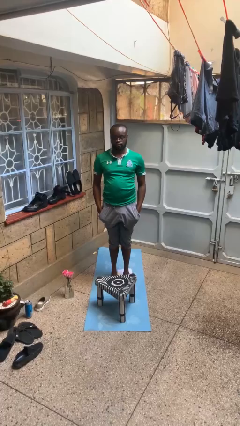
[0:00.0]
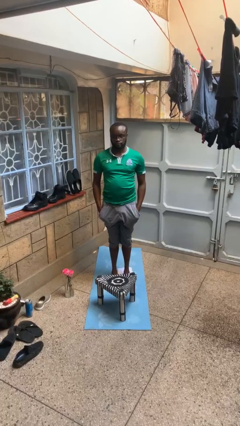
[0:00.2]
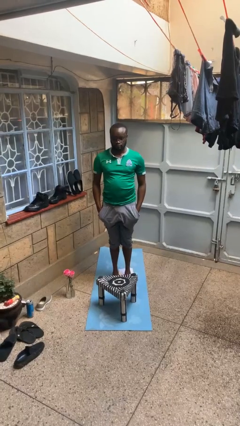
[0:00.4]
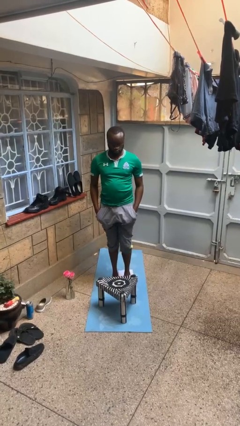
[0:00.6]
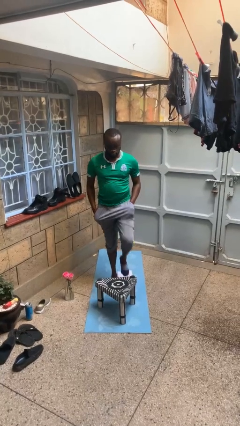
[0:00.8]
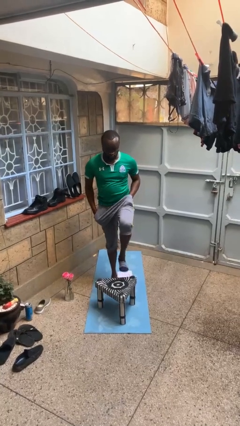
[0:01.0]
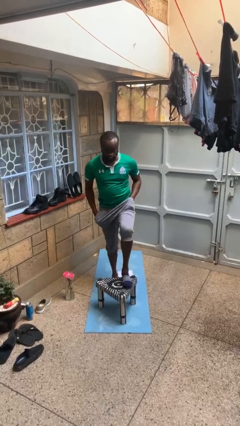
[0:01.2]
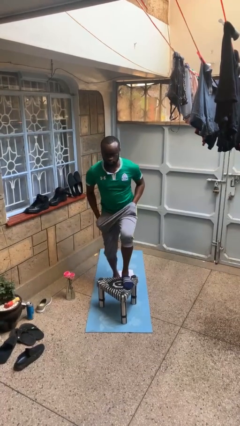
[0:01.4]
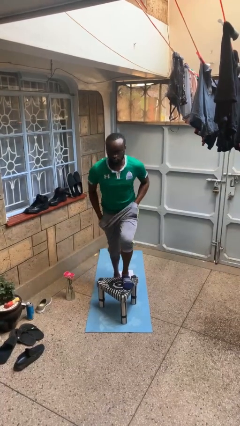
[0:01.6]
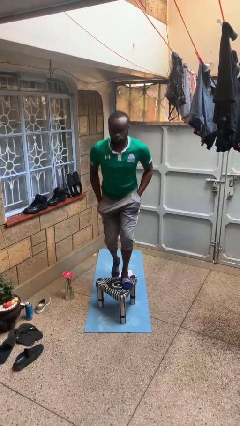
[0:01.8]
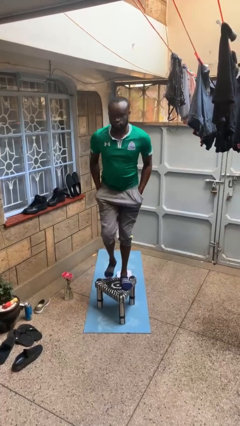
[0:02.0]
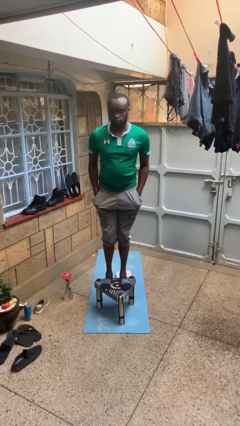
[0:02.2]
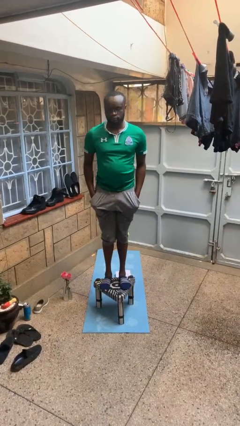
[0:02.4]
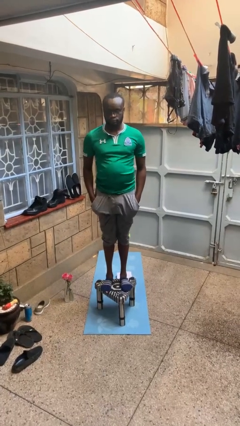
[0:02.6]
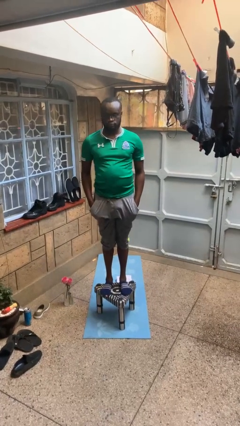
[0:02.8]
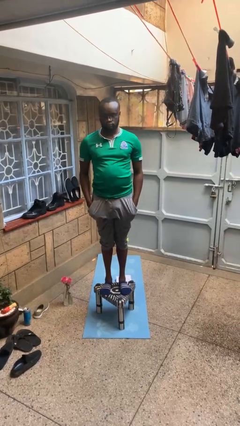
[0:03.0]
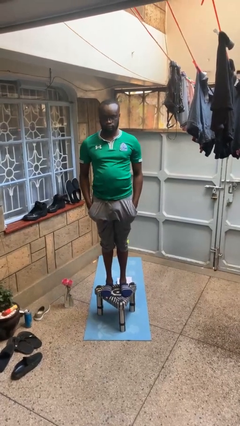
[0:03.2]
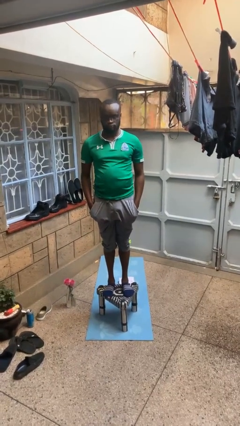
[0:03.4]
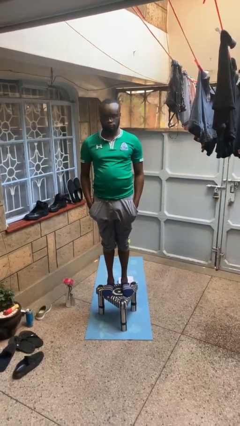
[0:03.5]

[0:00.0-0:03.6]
person climbs on table

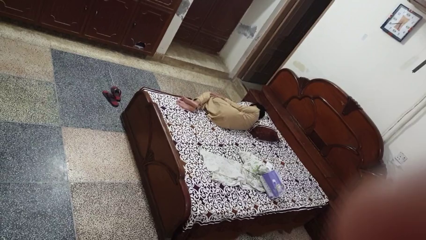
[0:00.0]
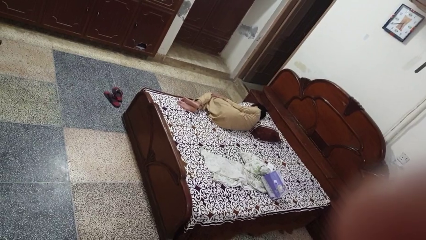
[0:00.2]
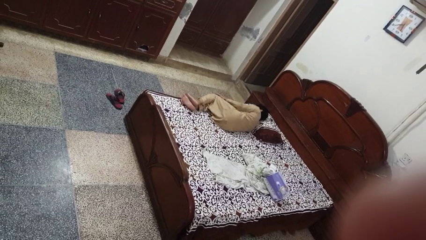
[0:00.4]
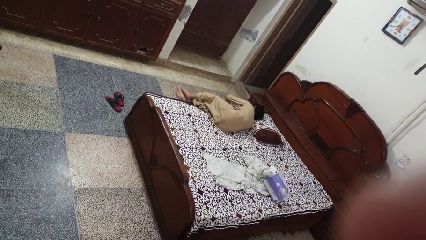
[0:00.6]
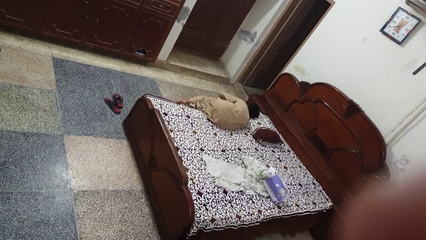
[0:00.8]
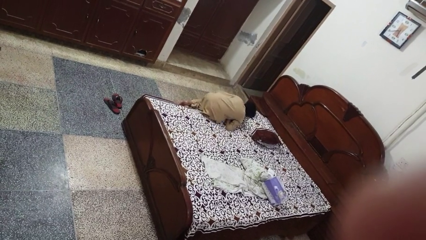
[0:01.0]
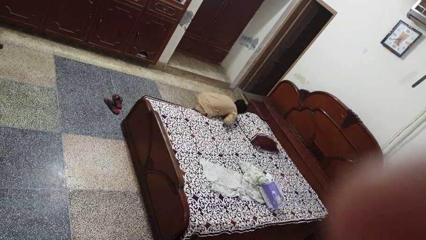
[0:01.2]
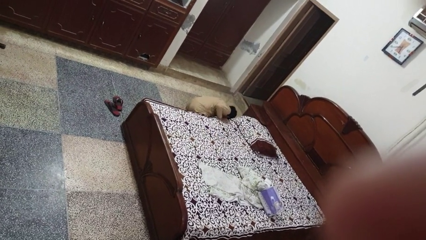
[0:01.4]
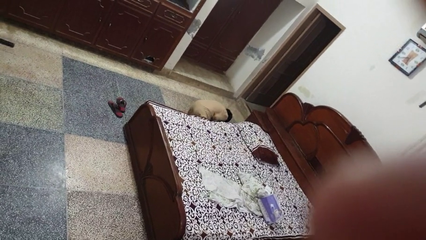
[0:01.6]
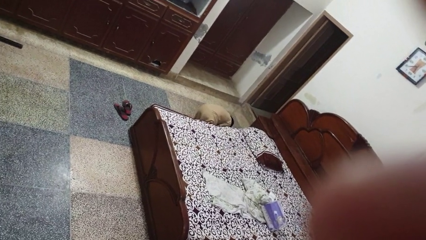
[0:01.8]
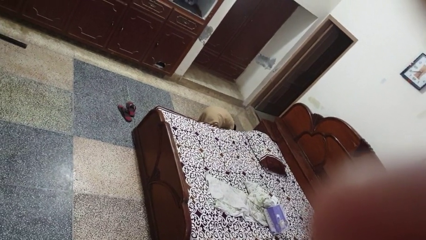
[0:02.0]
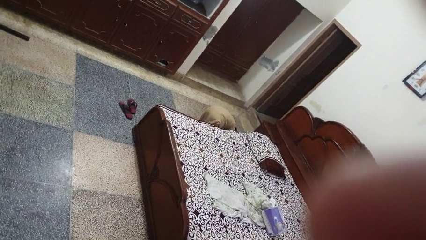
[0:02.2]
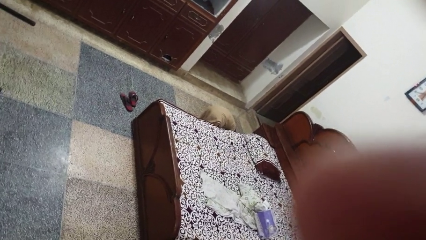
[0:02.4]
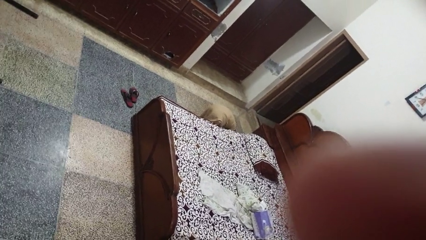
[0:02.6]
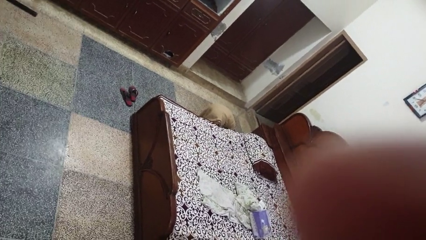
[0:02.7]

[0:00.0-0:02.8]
person falls from bed

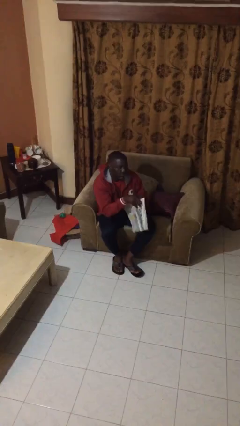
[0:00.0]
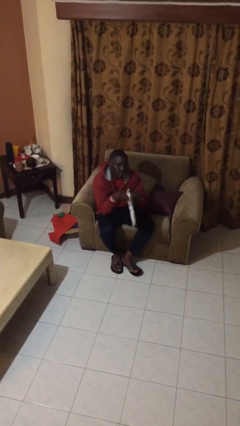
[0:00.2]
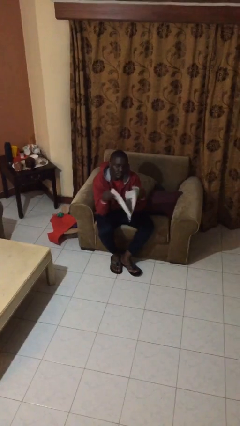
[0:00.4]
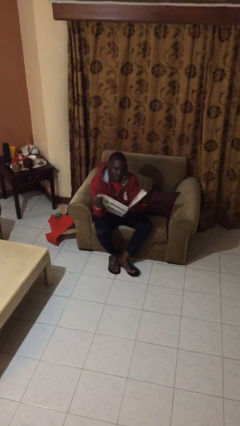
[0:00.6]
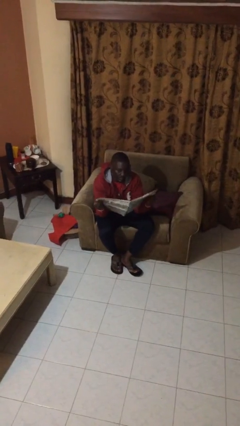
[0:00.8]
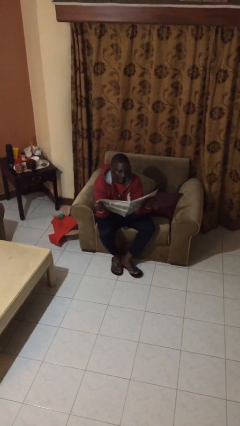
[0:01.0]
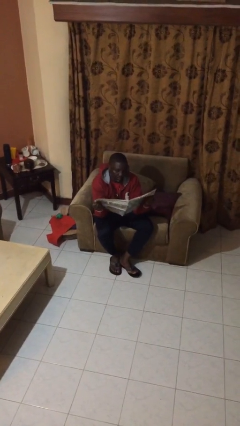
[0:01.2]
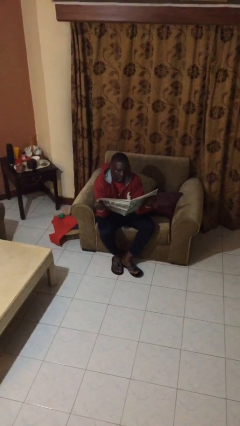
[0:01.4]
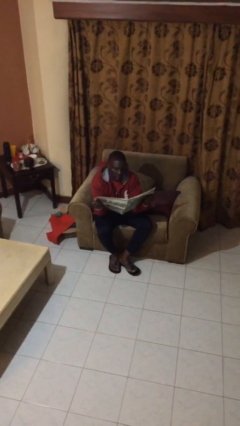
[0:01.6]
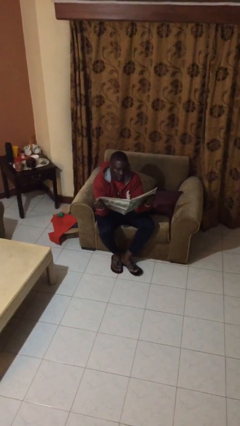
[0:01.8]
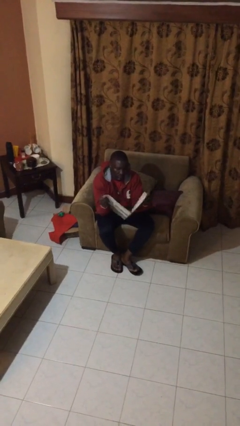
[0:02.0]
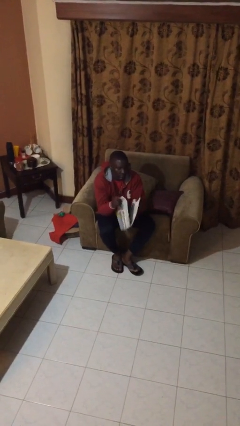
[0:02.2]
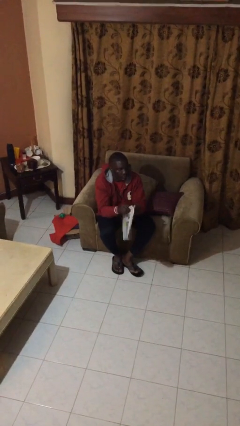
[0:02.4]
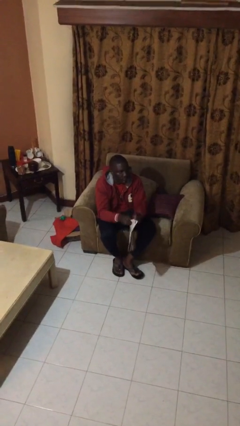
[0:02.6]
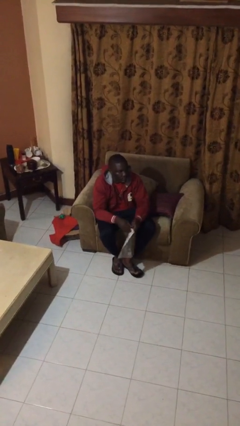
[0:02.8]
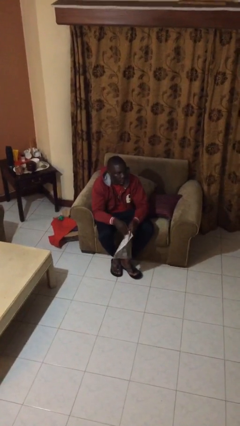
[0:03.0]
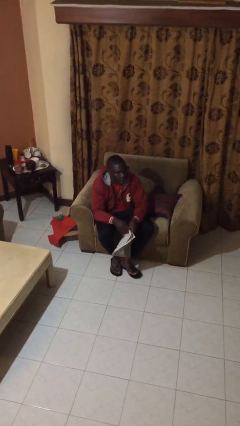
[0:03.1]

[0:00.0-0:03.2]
person reads newspaper

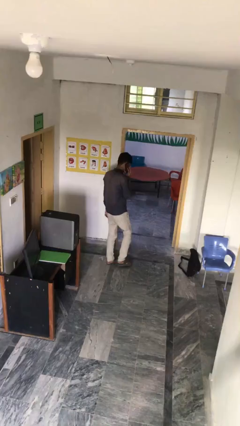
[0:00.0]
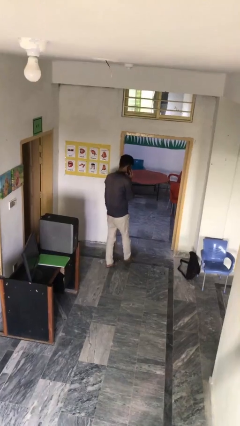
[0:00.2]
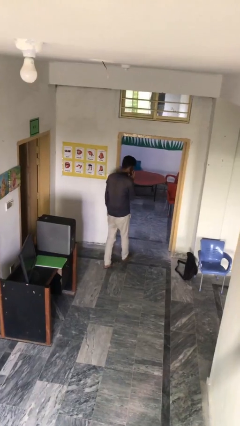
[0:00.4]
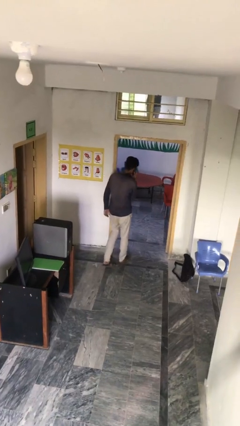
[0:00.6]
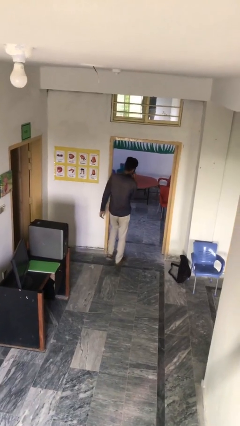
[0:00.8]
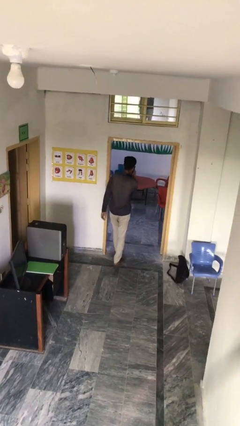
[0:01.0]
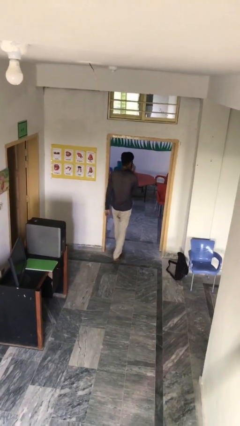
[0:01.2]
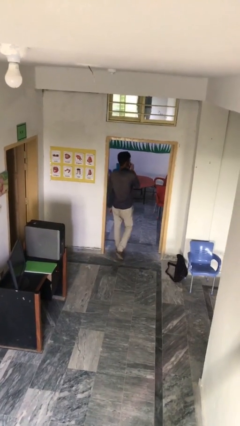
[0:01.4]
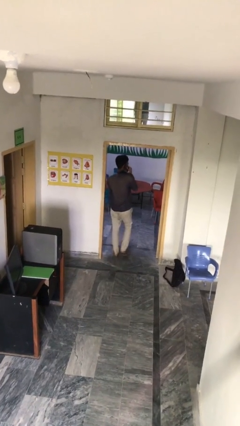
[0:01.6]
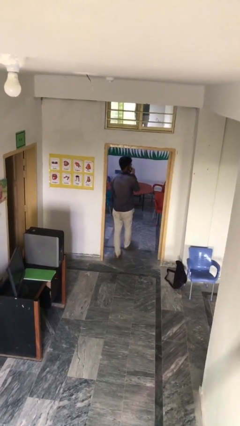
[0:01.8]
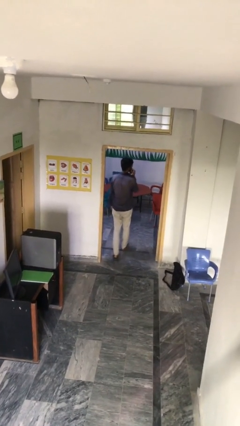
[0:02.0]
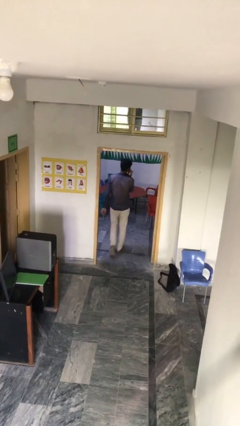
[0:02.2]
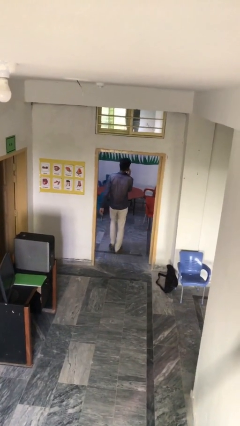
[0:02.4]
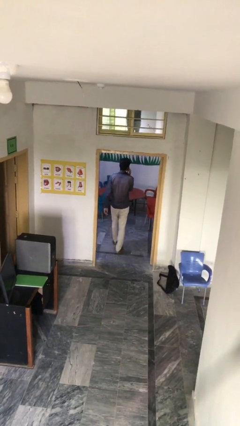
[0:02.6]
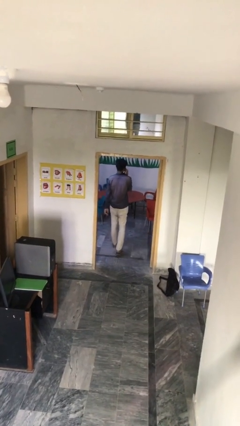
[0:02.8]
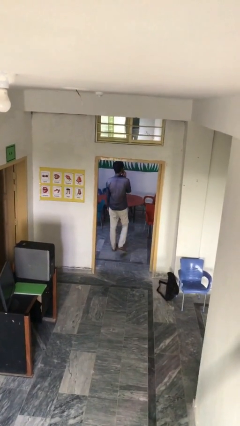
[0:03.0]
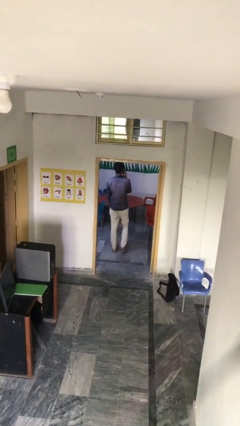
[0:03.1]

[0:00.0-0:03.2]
person exits scene through structure

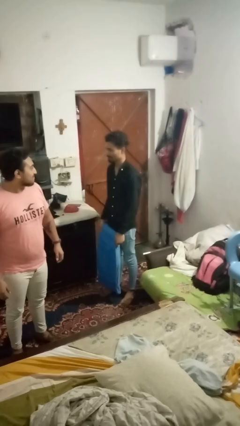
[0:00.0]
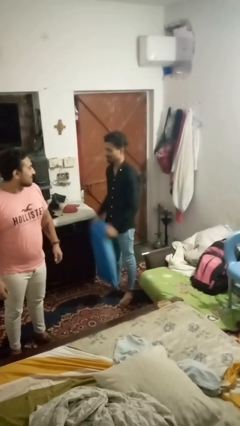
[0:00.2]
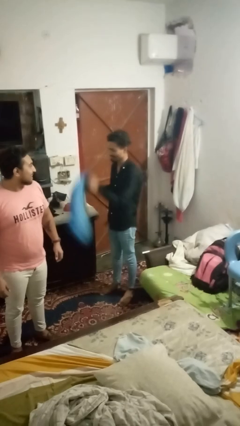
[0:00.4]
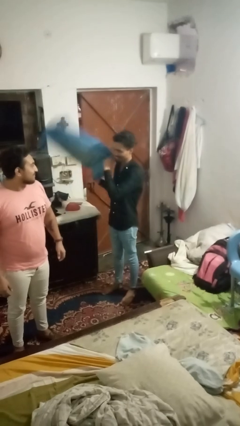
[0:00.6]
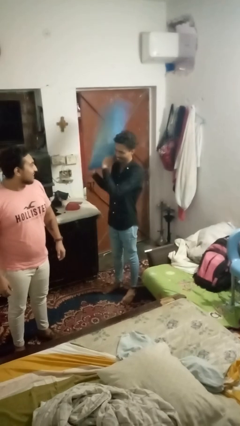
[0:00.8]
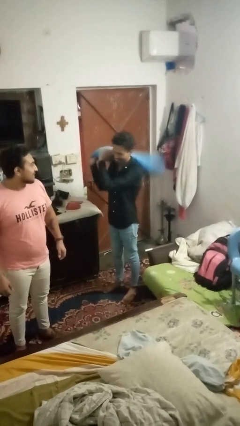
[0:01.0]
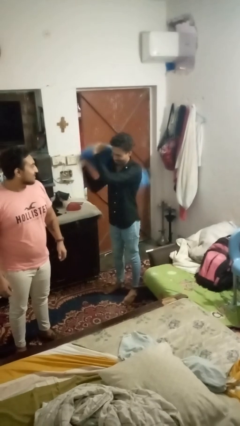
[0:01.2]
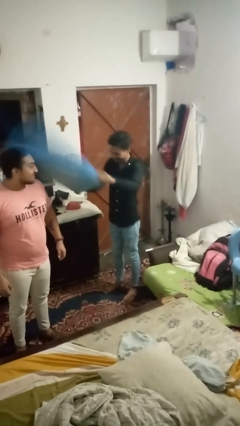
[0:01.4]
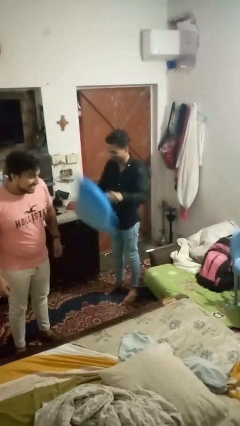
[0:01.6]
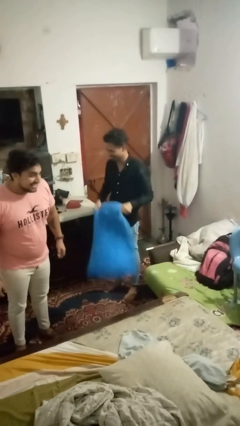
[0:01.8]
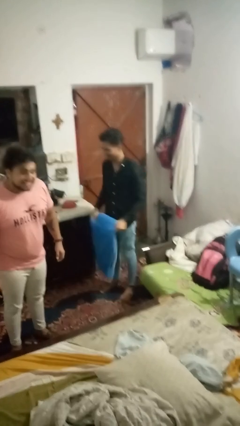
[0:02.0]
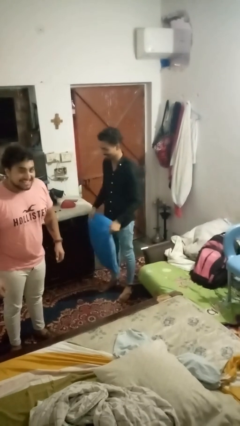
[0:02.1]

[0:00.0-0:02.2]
person hits person with pillow

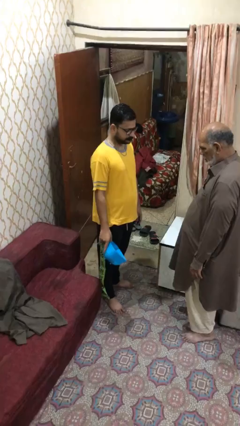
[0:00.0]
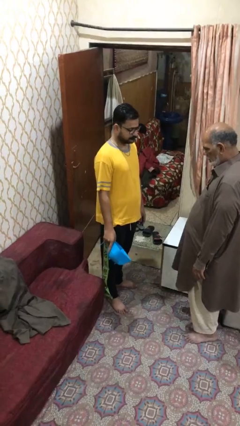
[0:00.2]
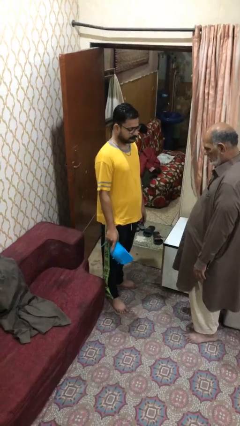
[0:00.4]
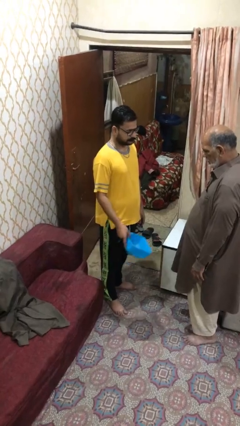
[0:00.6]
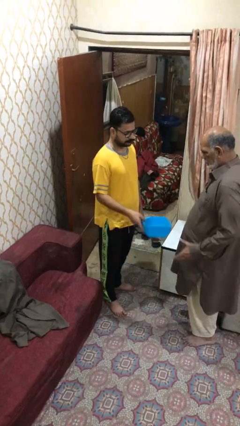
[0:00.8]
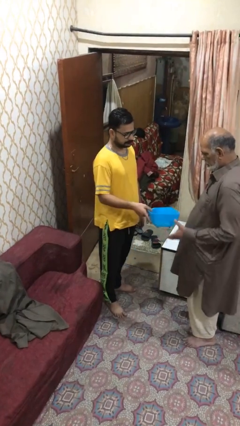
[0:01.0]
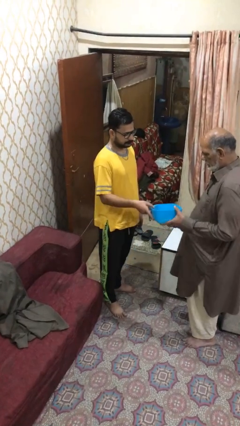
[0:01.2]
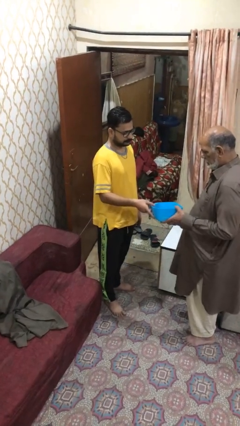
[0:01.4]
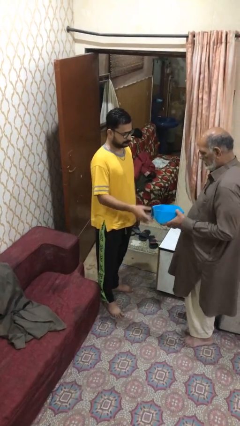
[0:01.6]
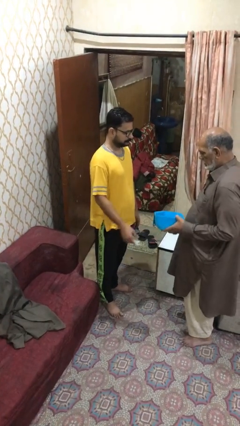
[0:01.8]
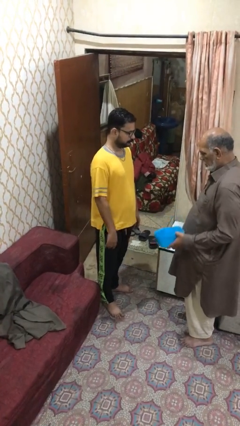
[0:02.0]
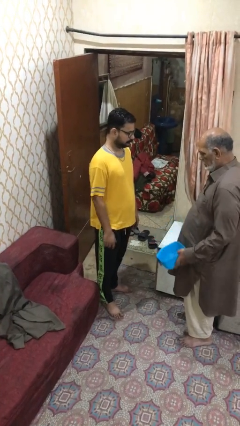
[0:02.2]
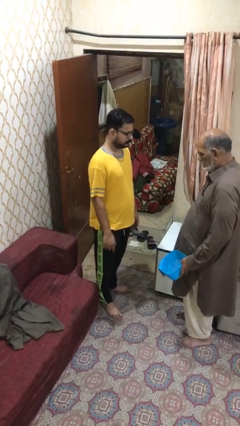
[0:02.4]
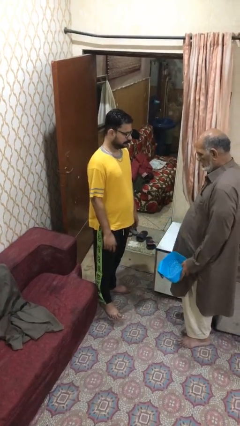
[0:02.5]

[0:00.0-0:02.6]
person transfers object to person
